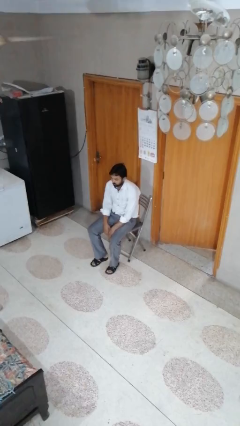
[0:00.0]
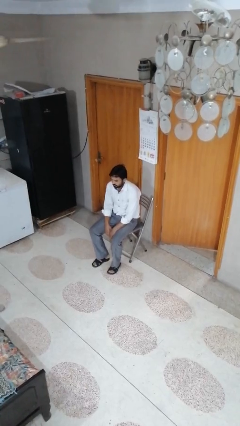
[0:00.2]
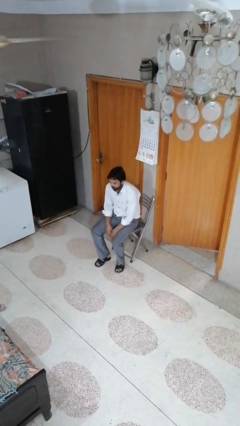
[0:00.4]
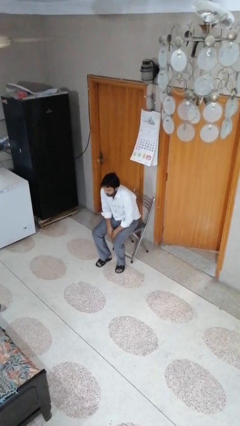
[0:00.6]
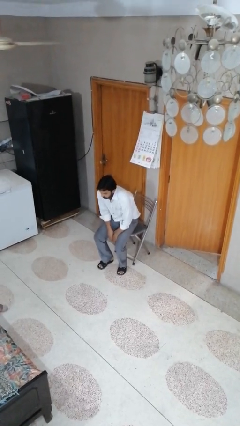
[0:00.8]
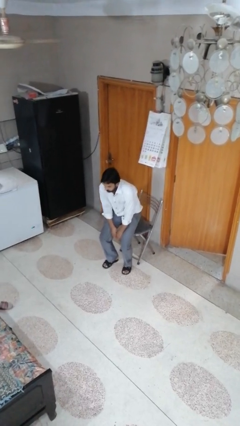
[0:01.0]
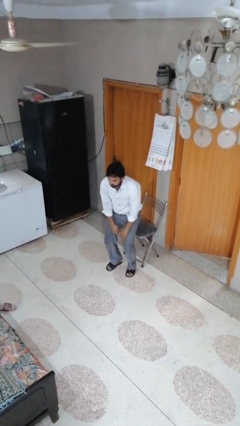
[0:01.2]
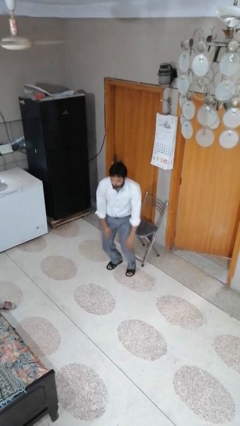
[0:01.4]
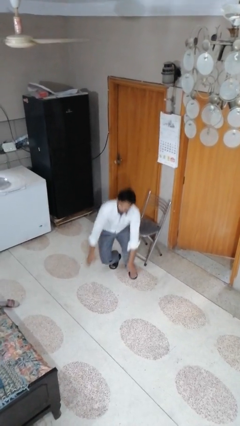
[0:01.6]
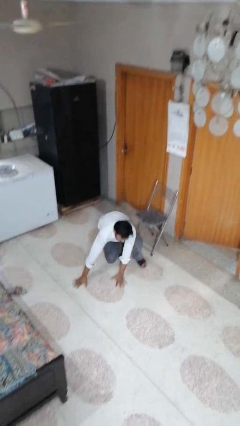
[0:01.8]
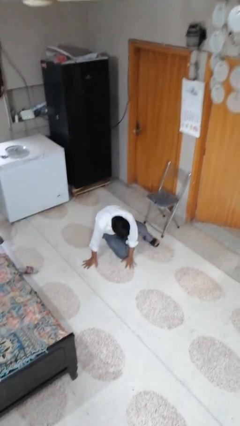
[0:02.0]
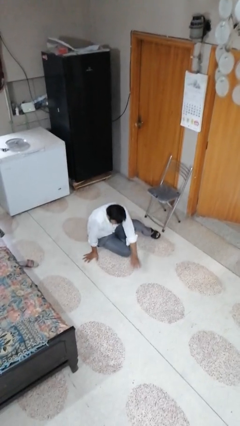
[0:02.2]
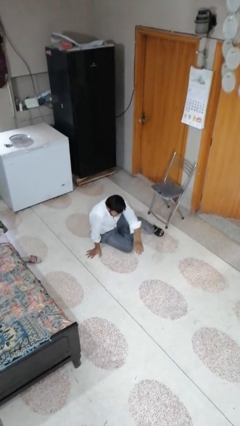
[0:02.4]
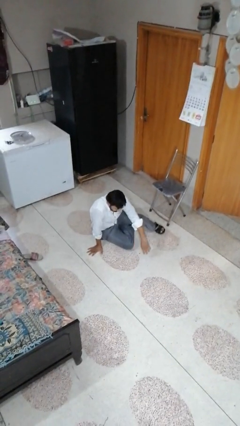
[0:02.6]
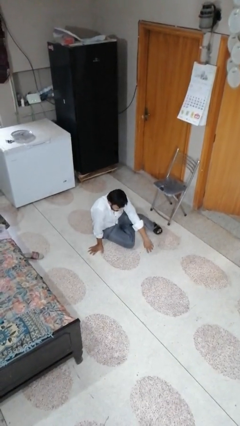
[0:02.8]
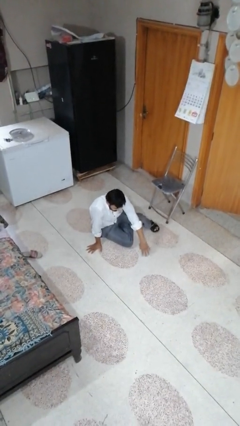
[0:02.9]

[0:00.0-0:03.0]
person falls from chair

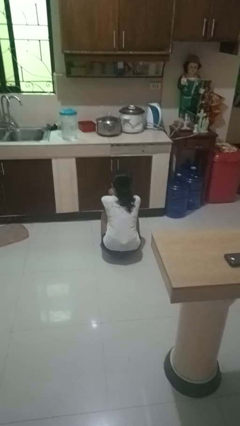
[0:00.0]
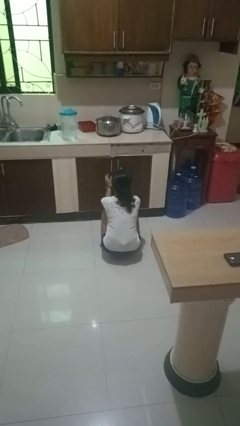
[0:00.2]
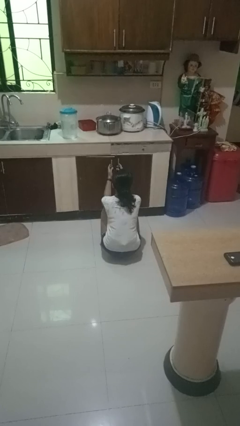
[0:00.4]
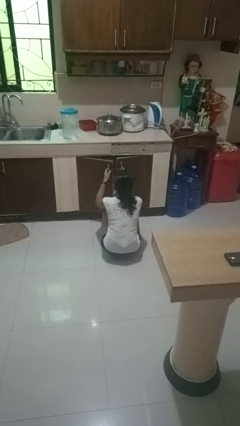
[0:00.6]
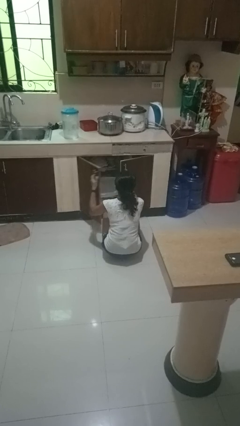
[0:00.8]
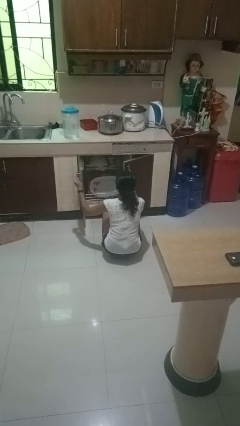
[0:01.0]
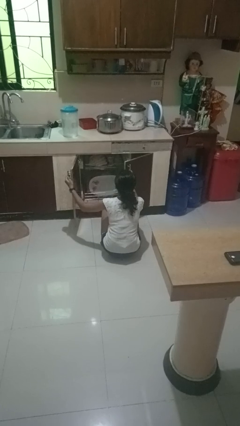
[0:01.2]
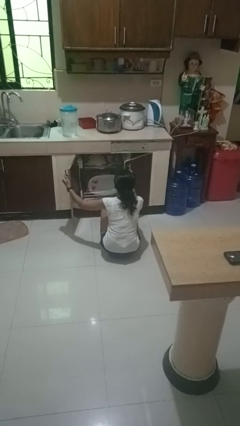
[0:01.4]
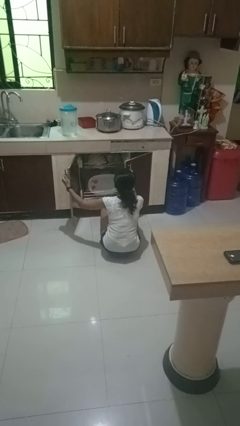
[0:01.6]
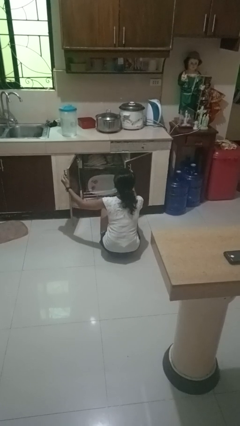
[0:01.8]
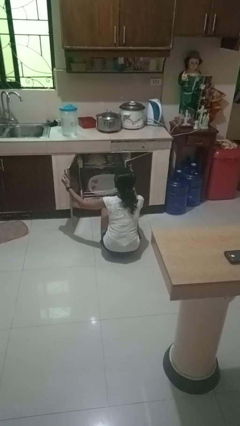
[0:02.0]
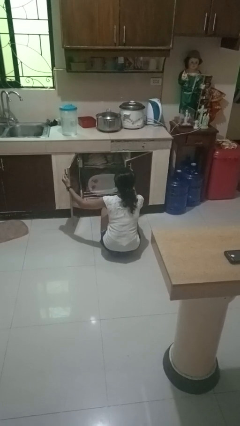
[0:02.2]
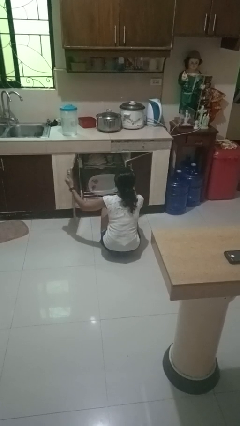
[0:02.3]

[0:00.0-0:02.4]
person opens dishwasher

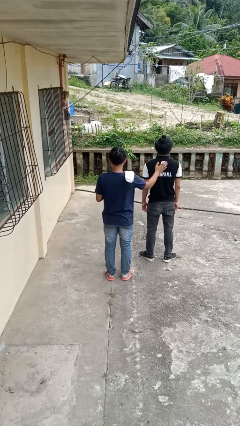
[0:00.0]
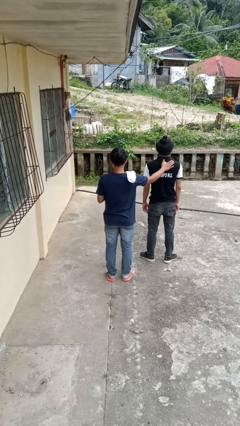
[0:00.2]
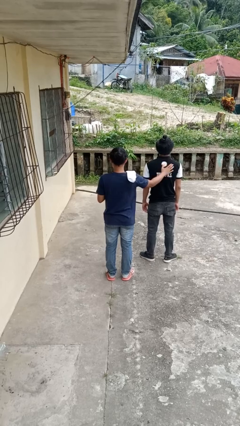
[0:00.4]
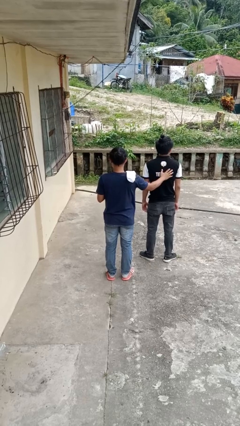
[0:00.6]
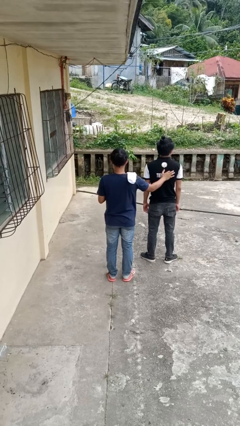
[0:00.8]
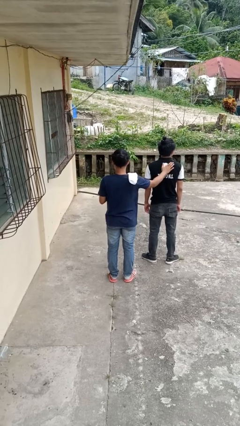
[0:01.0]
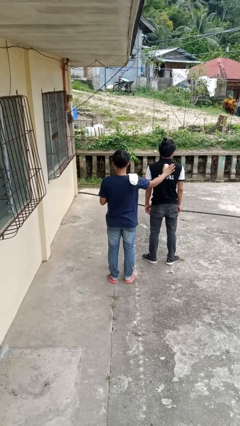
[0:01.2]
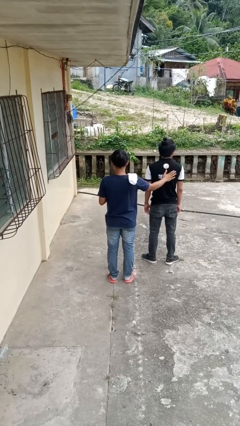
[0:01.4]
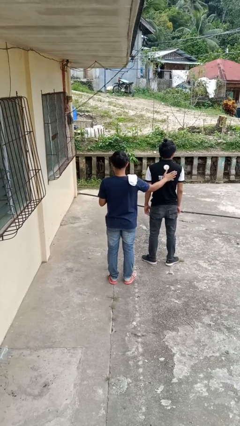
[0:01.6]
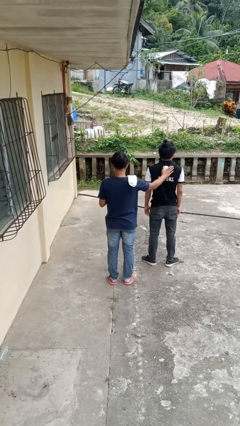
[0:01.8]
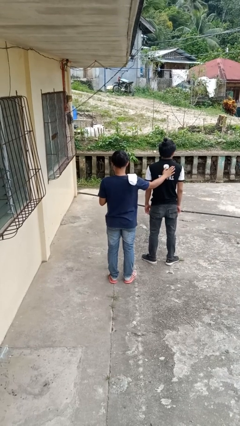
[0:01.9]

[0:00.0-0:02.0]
person touches back of person

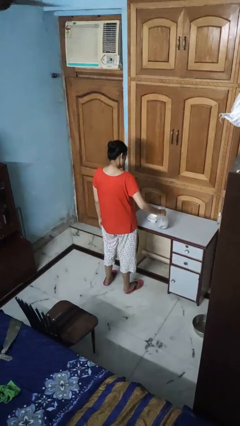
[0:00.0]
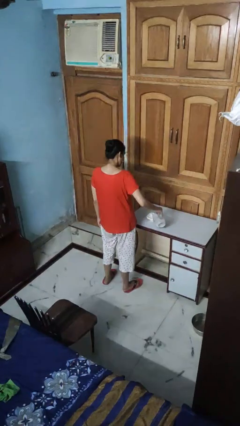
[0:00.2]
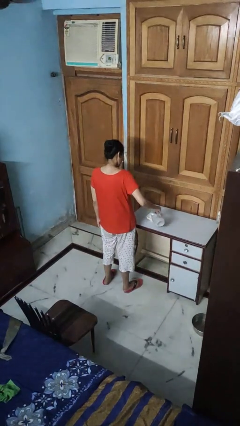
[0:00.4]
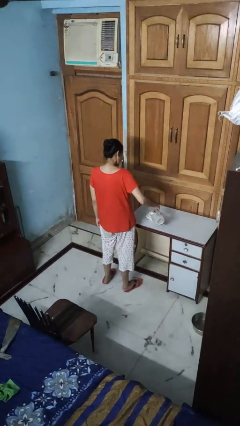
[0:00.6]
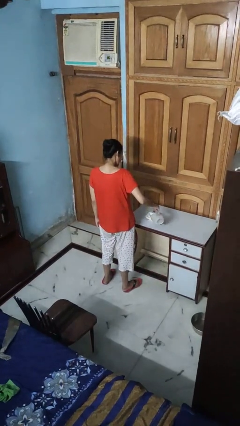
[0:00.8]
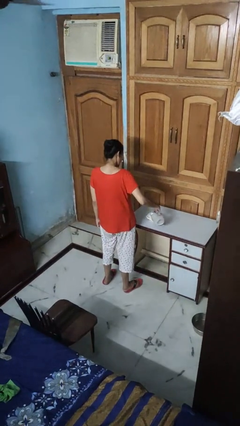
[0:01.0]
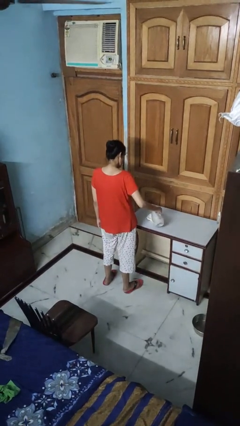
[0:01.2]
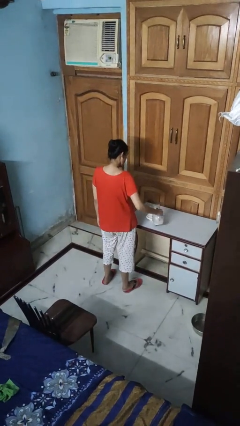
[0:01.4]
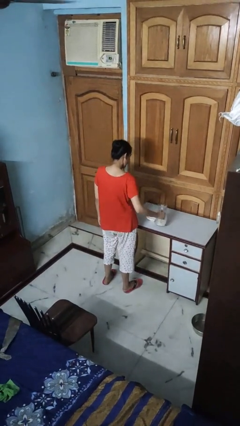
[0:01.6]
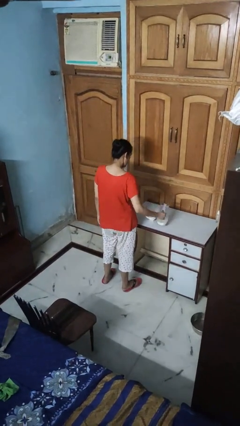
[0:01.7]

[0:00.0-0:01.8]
person pours into bowl

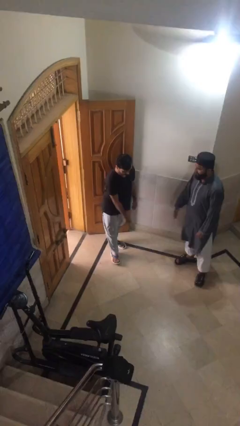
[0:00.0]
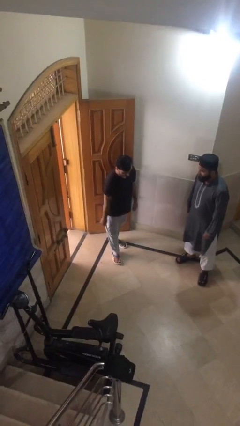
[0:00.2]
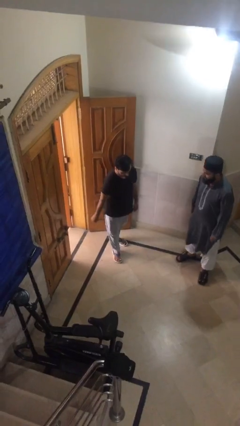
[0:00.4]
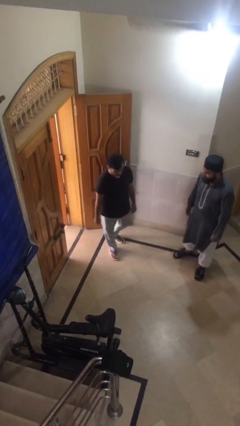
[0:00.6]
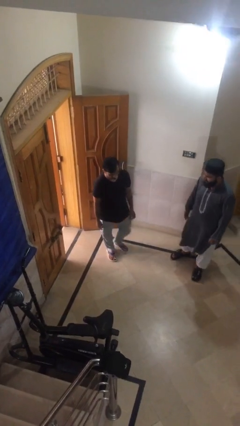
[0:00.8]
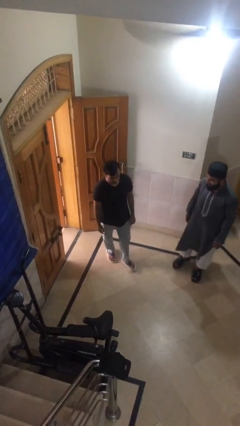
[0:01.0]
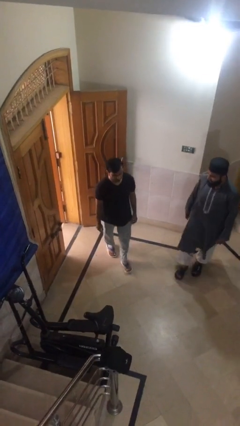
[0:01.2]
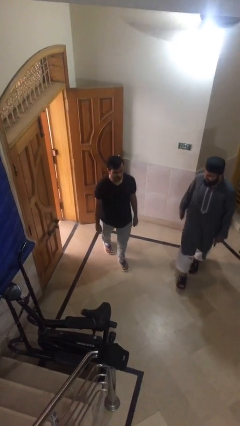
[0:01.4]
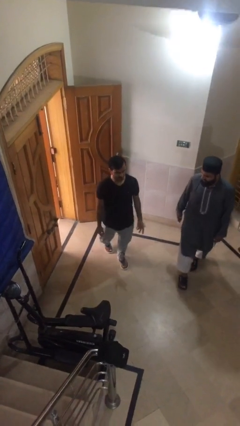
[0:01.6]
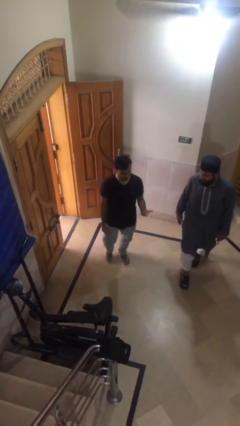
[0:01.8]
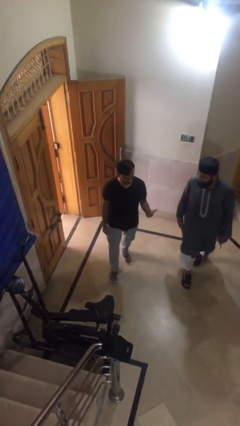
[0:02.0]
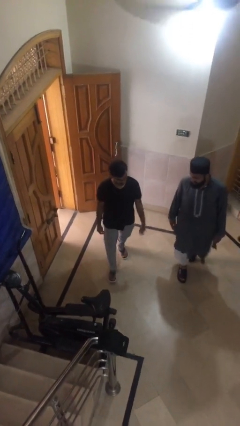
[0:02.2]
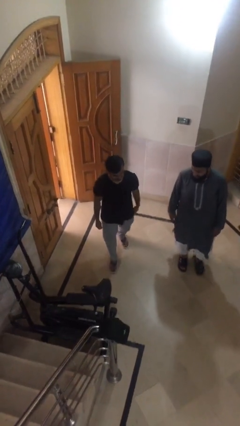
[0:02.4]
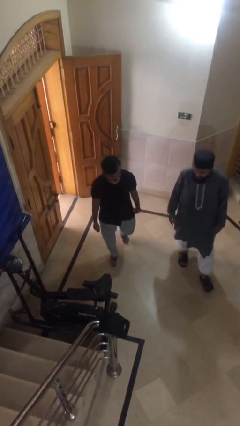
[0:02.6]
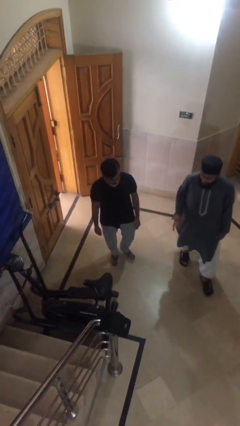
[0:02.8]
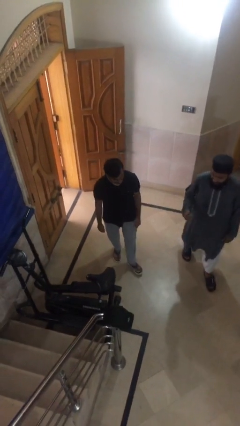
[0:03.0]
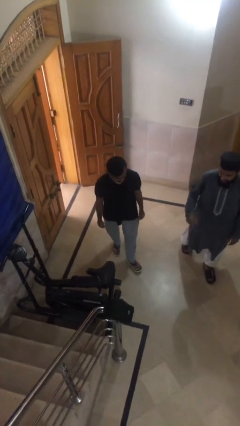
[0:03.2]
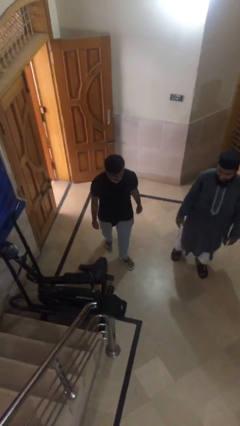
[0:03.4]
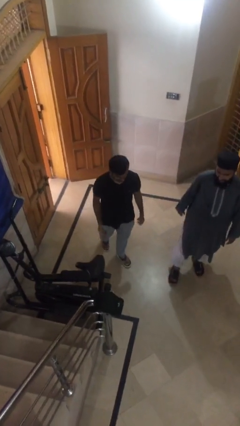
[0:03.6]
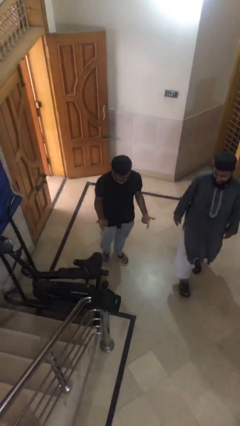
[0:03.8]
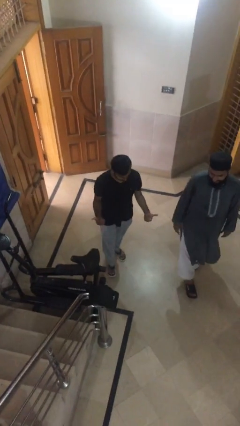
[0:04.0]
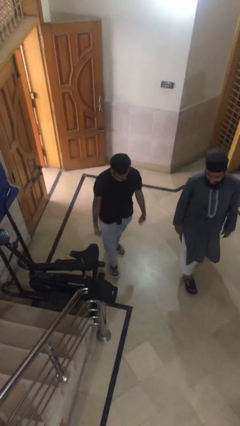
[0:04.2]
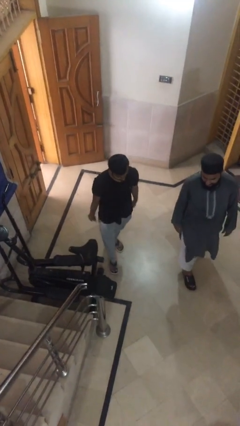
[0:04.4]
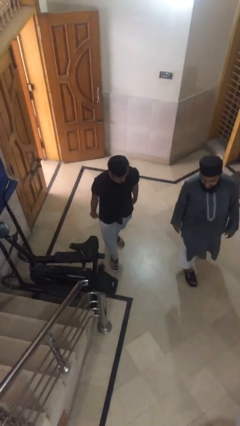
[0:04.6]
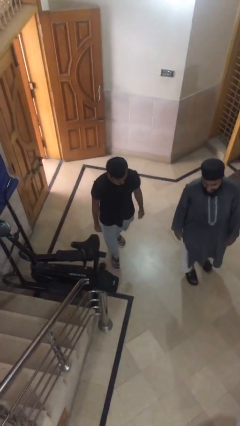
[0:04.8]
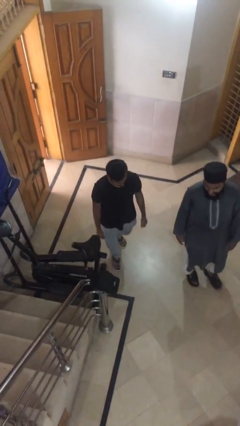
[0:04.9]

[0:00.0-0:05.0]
person talks to person

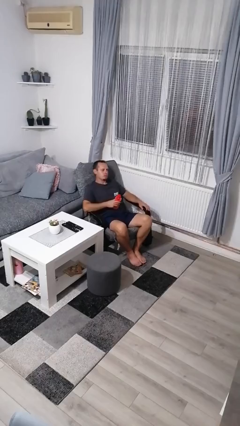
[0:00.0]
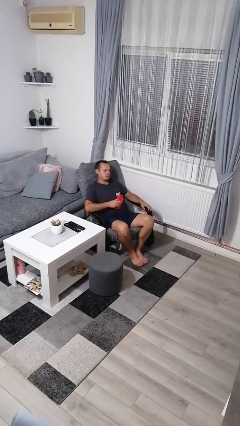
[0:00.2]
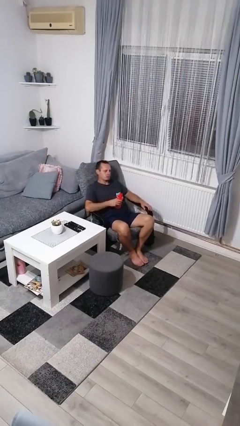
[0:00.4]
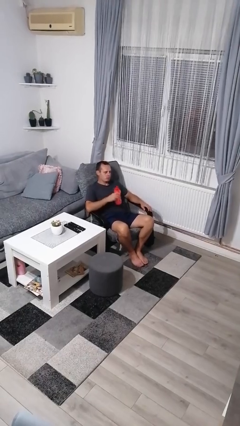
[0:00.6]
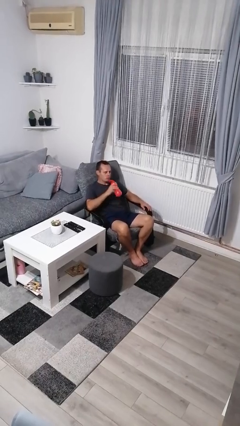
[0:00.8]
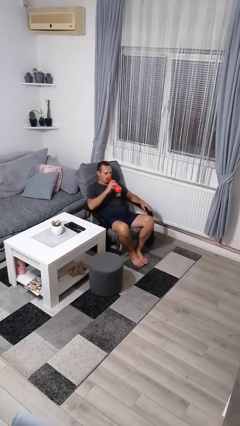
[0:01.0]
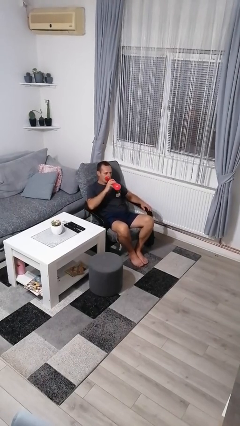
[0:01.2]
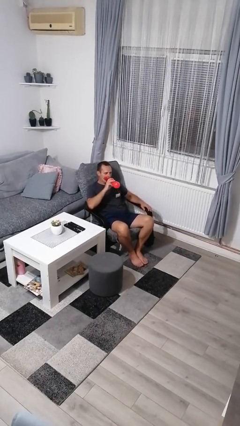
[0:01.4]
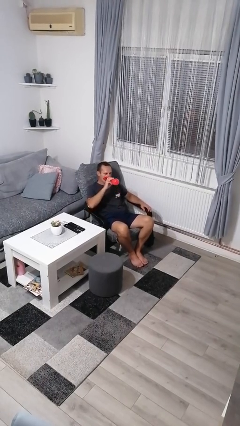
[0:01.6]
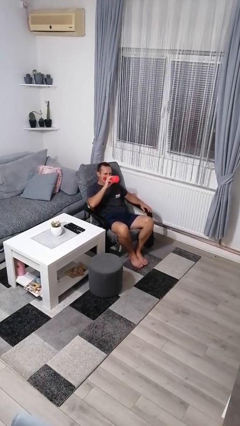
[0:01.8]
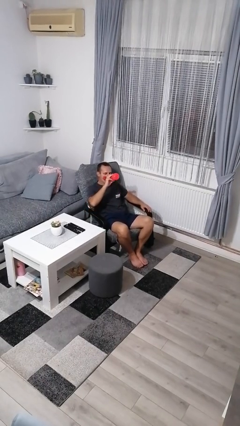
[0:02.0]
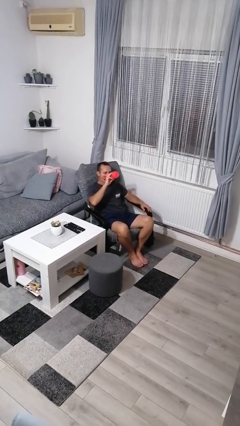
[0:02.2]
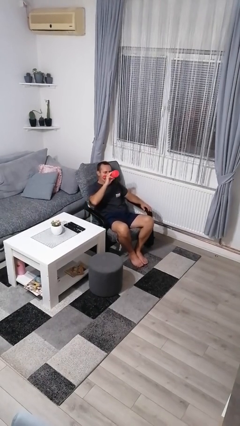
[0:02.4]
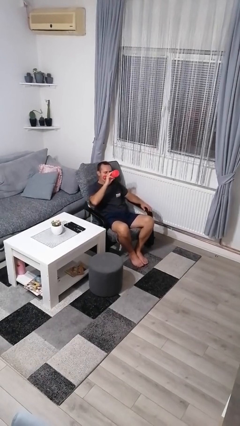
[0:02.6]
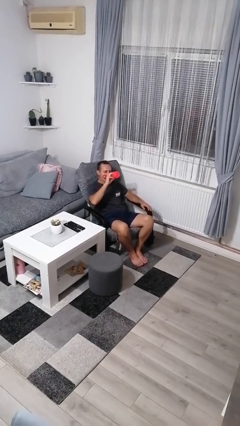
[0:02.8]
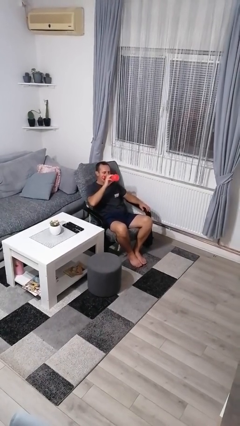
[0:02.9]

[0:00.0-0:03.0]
person drinks from bottle

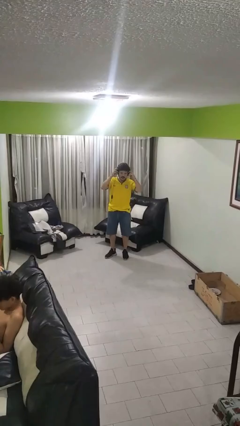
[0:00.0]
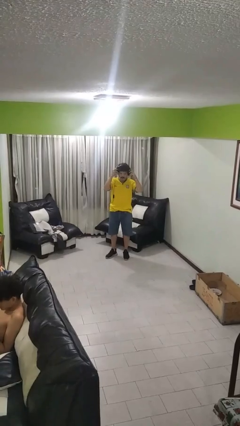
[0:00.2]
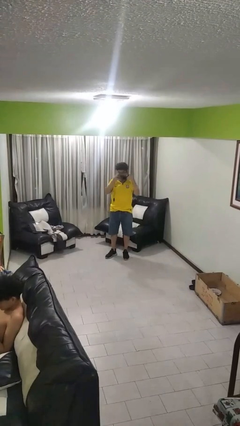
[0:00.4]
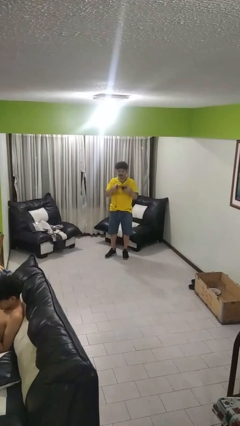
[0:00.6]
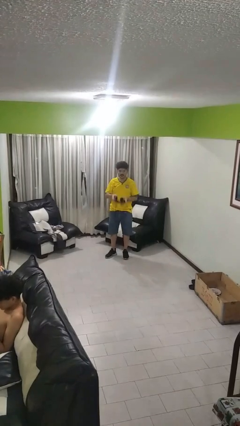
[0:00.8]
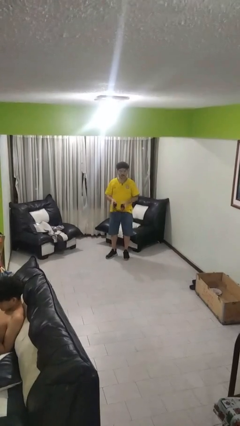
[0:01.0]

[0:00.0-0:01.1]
person takes off headphones
